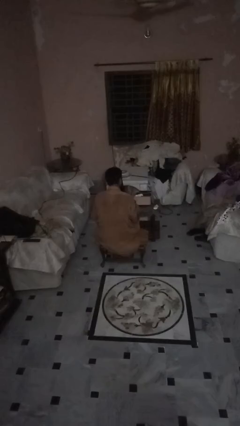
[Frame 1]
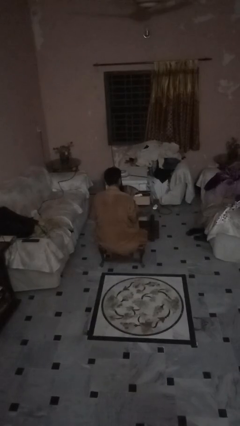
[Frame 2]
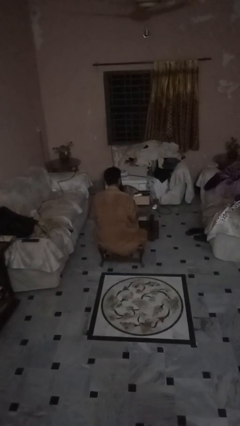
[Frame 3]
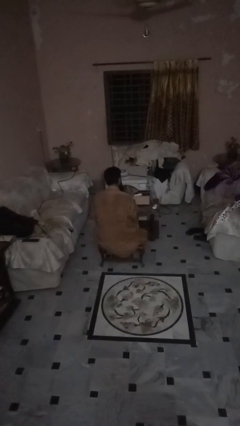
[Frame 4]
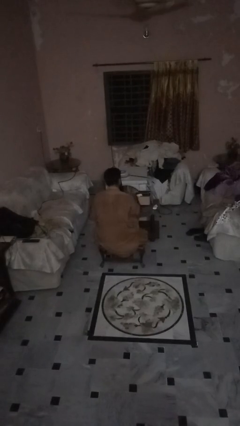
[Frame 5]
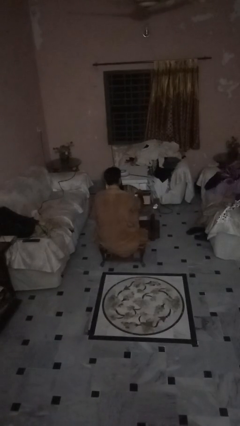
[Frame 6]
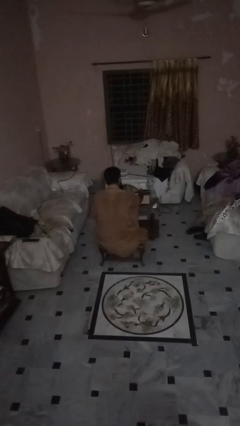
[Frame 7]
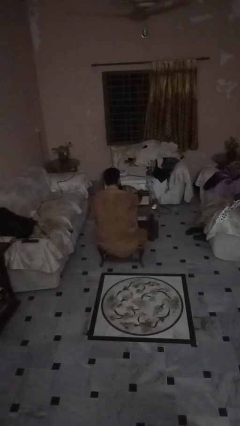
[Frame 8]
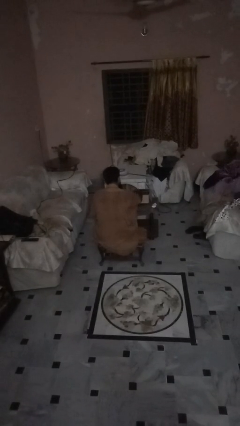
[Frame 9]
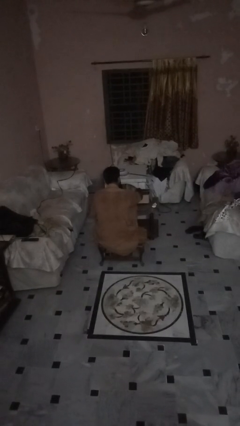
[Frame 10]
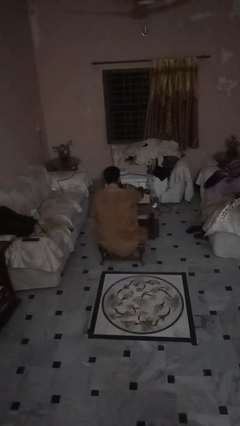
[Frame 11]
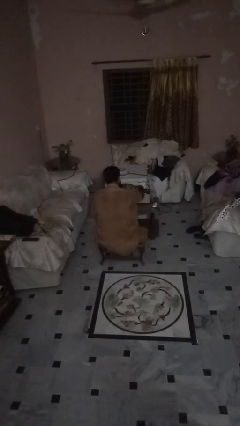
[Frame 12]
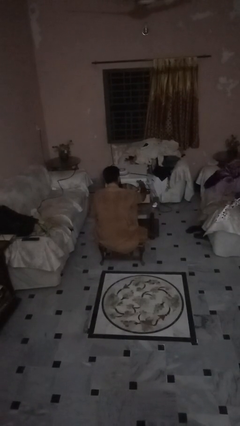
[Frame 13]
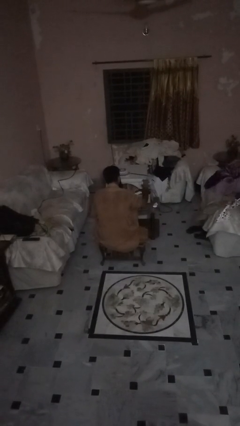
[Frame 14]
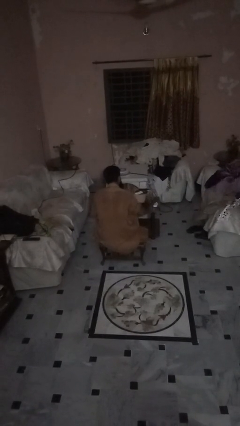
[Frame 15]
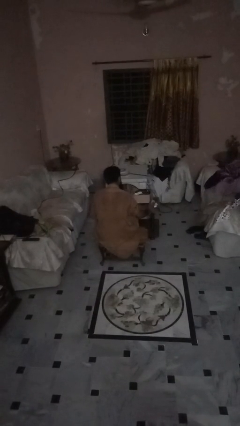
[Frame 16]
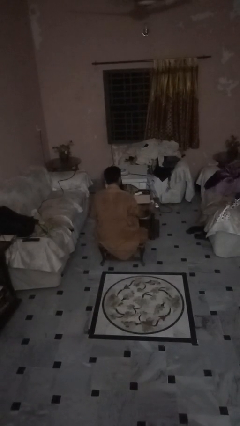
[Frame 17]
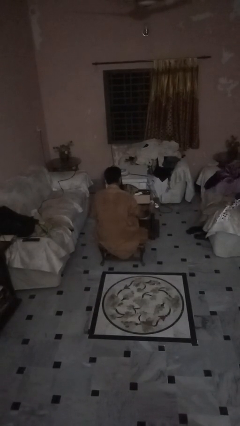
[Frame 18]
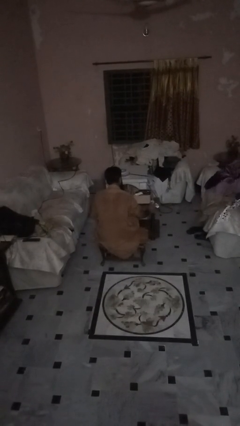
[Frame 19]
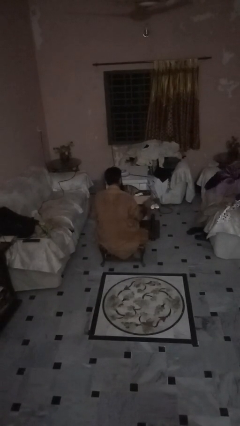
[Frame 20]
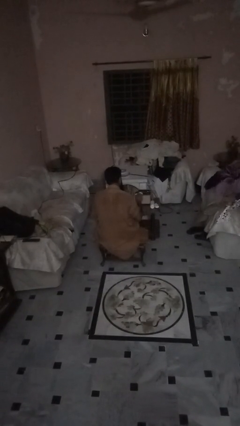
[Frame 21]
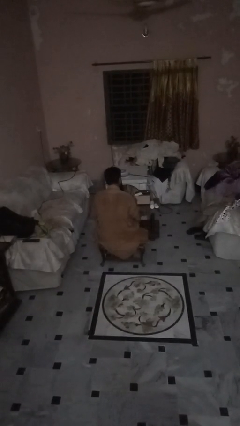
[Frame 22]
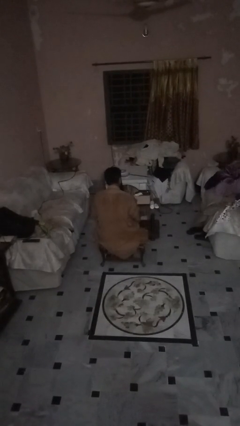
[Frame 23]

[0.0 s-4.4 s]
person unloads box onto table

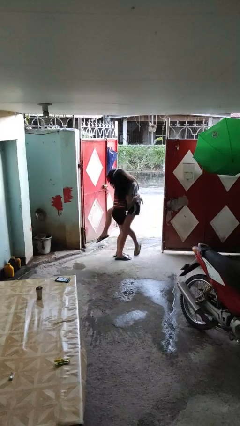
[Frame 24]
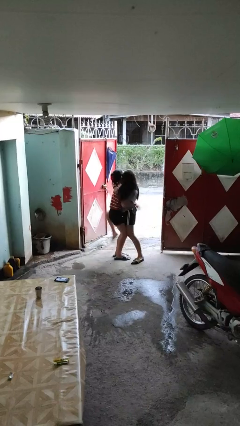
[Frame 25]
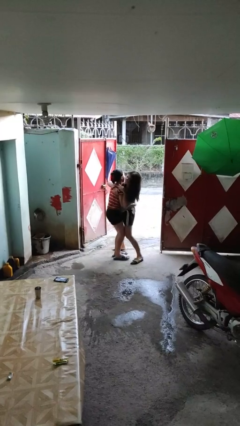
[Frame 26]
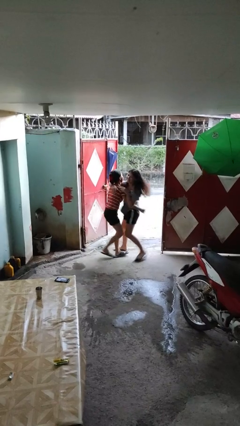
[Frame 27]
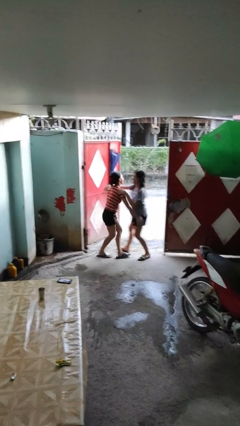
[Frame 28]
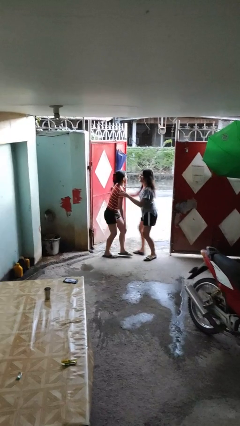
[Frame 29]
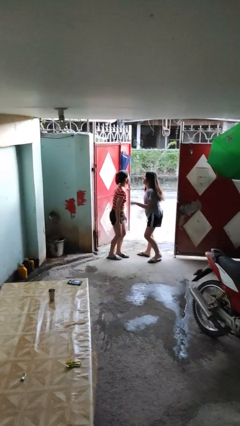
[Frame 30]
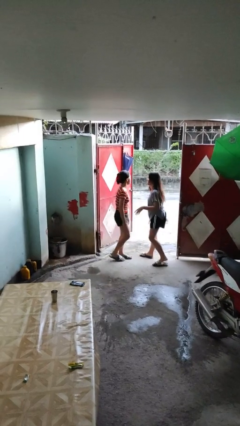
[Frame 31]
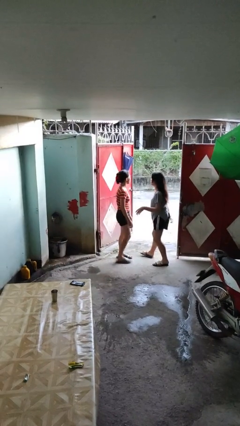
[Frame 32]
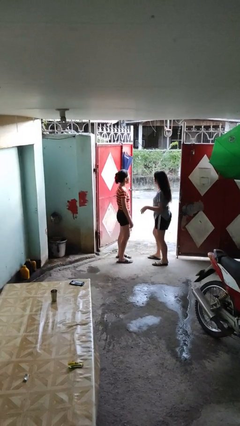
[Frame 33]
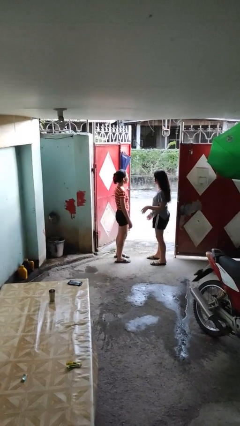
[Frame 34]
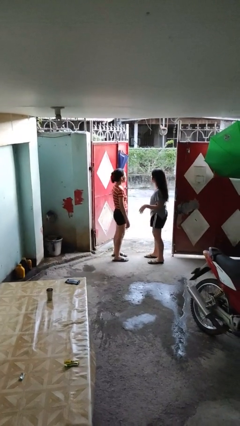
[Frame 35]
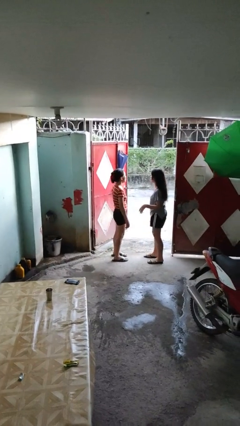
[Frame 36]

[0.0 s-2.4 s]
person puts down person

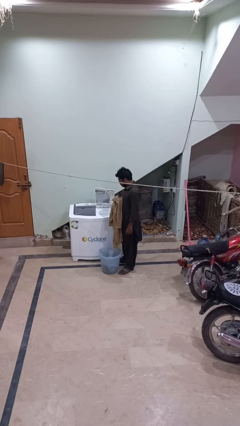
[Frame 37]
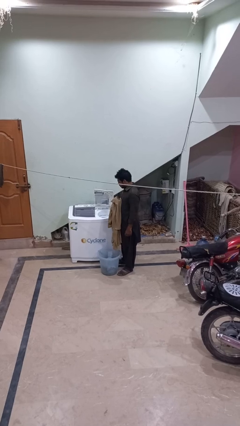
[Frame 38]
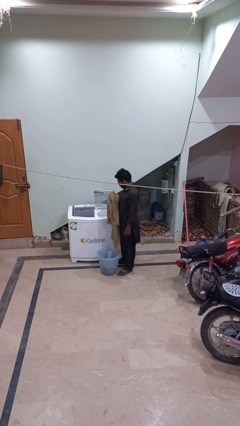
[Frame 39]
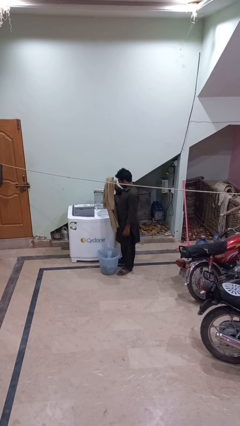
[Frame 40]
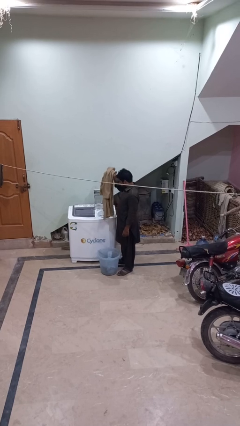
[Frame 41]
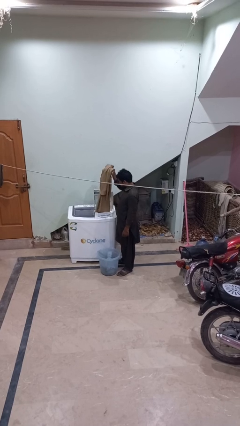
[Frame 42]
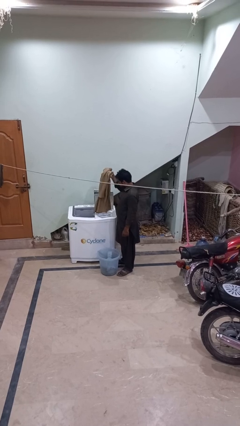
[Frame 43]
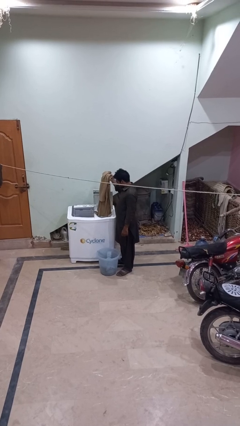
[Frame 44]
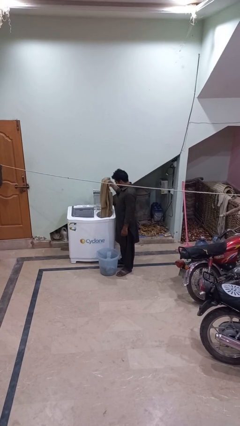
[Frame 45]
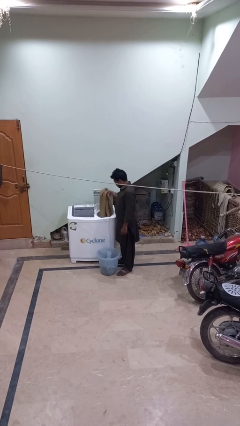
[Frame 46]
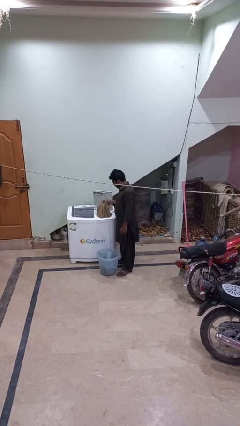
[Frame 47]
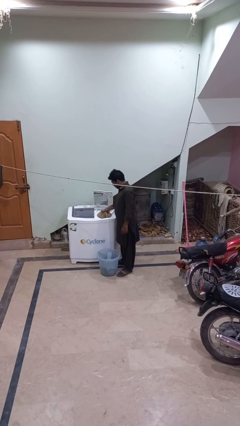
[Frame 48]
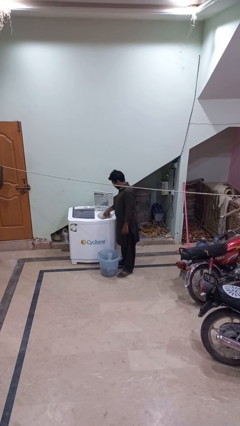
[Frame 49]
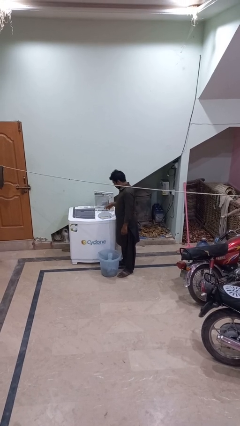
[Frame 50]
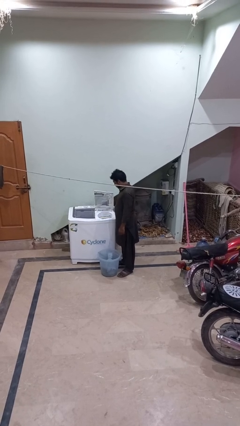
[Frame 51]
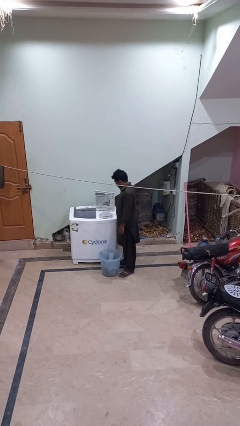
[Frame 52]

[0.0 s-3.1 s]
person loads dryer

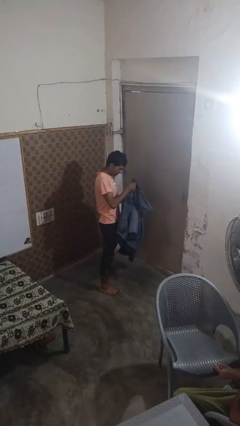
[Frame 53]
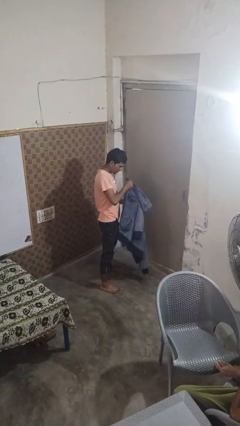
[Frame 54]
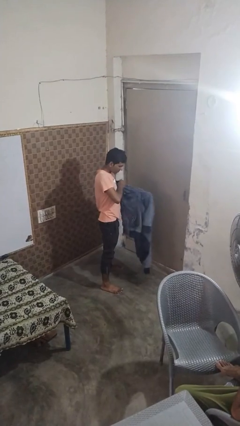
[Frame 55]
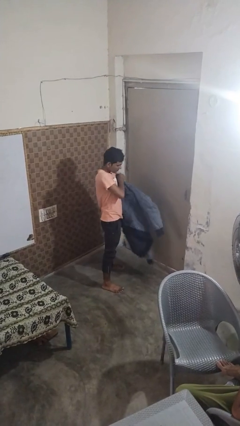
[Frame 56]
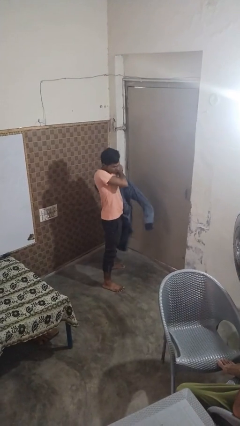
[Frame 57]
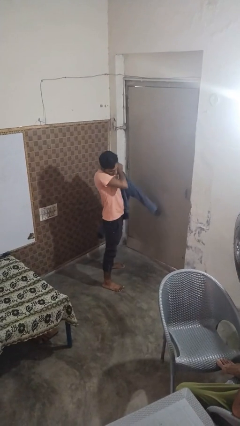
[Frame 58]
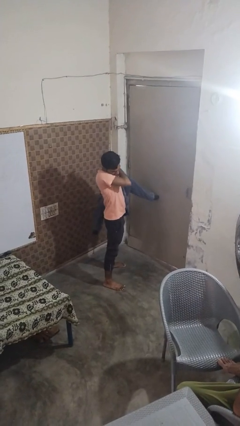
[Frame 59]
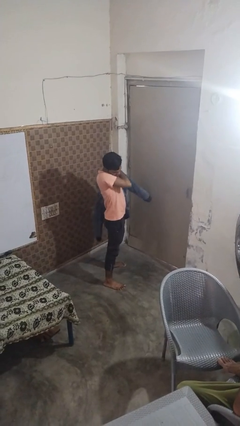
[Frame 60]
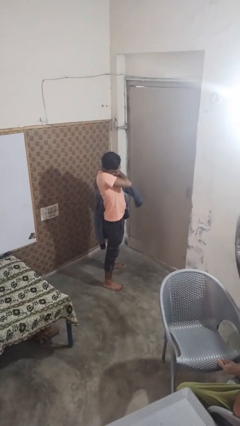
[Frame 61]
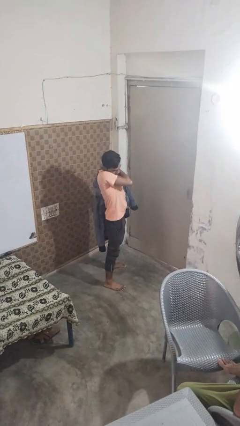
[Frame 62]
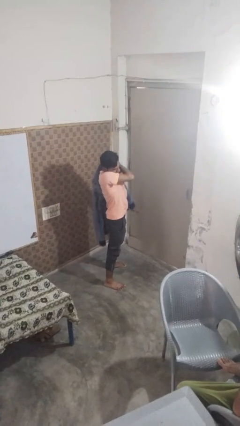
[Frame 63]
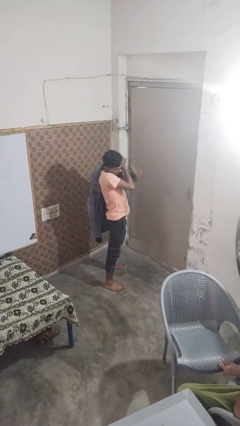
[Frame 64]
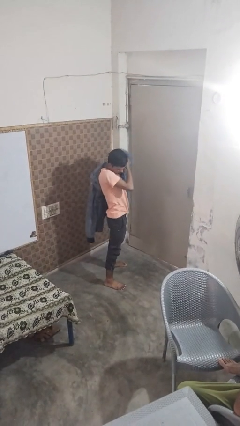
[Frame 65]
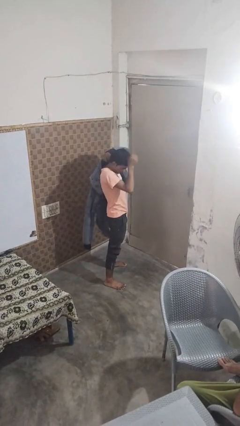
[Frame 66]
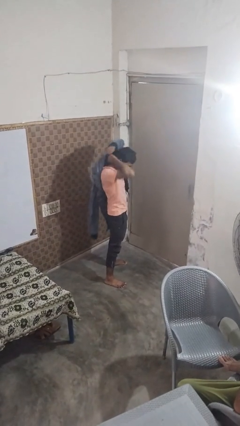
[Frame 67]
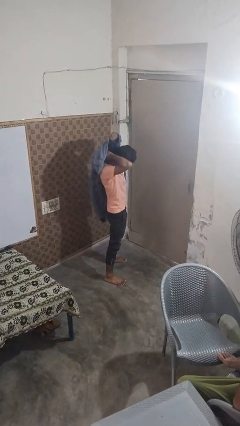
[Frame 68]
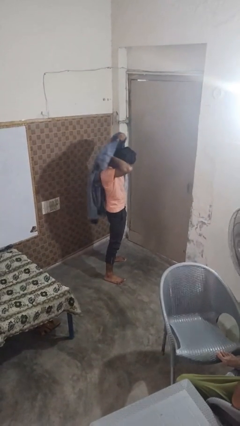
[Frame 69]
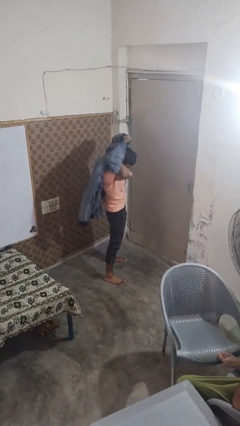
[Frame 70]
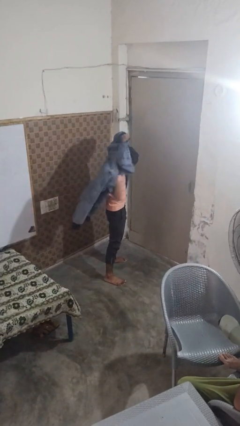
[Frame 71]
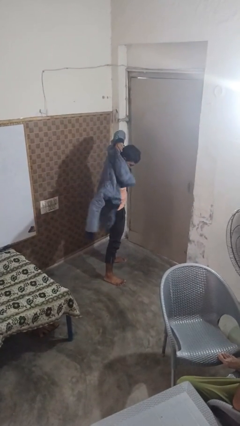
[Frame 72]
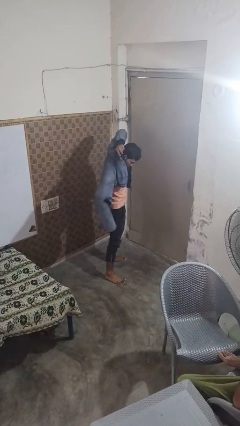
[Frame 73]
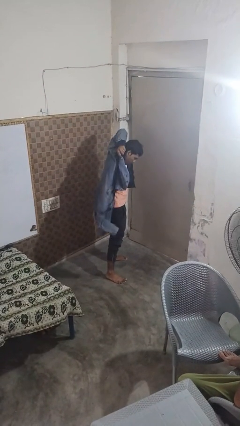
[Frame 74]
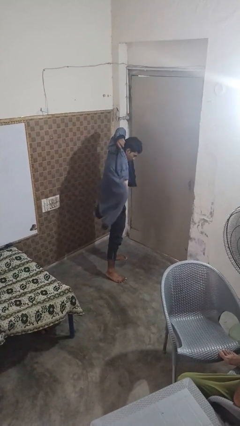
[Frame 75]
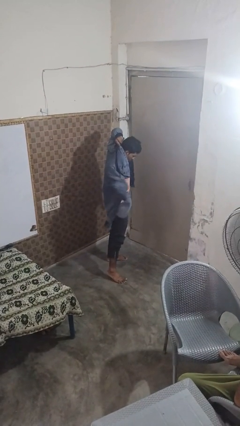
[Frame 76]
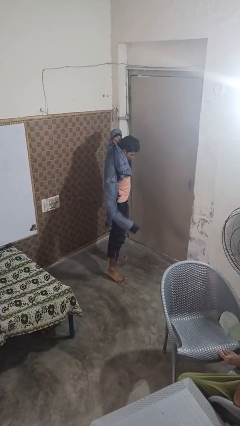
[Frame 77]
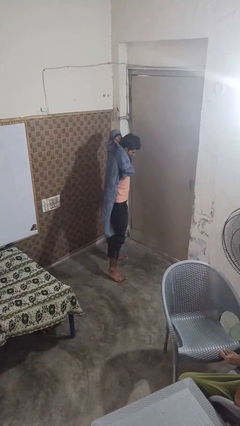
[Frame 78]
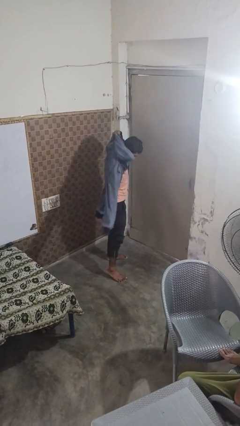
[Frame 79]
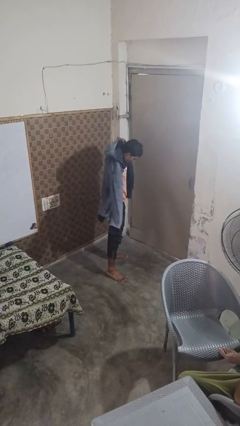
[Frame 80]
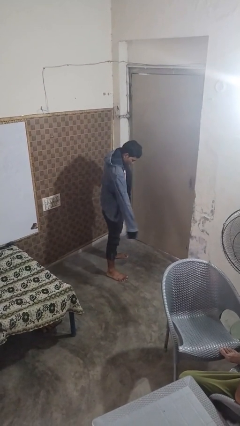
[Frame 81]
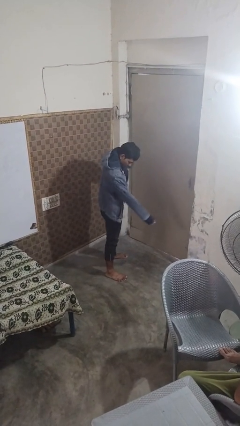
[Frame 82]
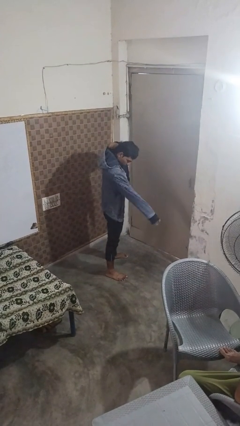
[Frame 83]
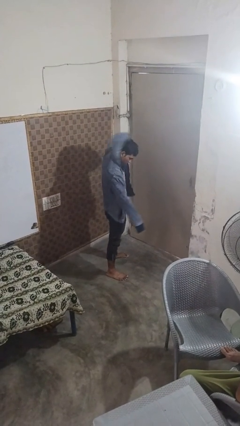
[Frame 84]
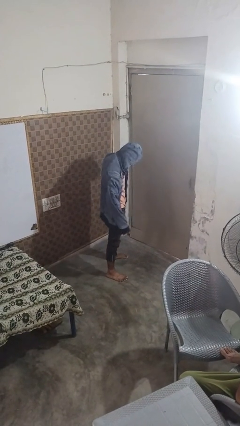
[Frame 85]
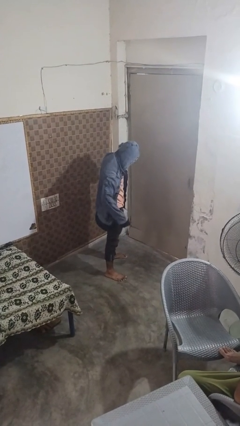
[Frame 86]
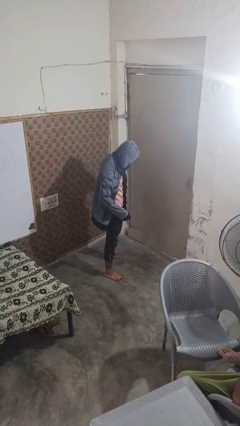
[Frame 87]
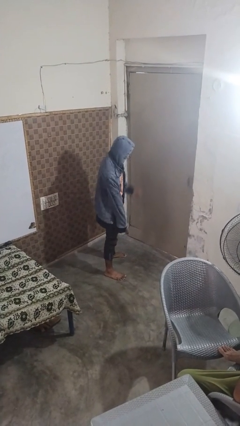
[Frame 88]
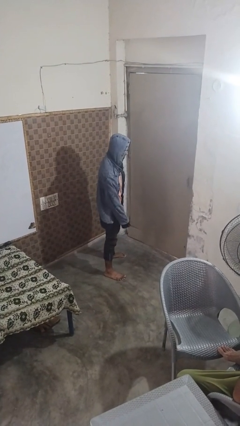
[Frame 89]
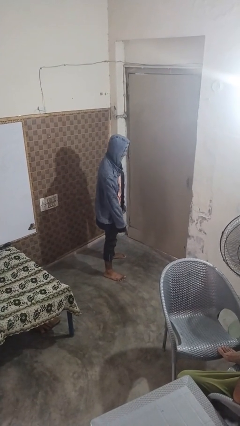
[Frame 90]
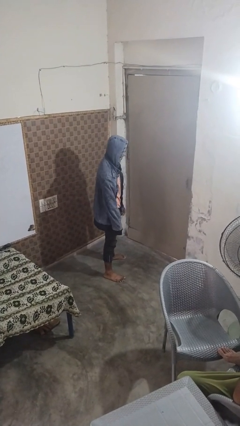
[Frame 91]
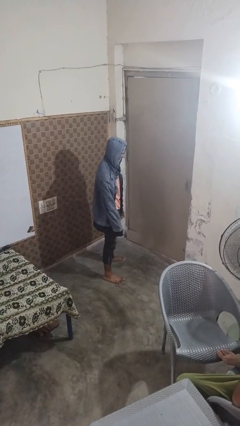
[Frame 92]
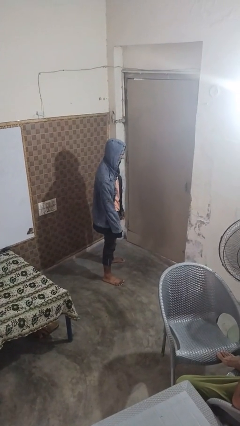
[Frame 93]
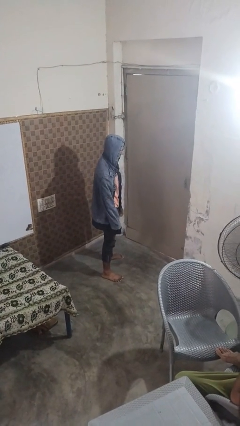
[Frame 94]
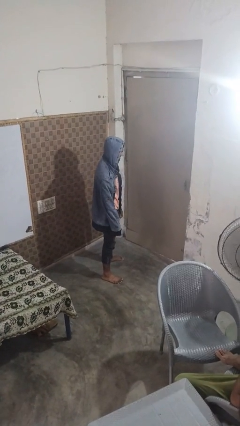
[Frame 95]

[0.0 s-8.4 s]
person puts on hoodie
